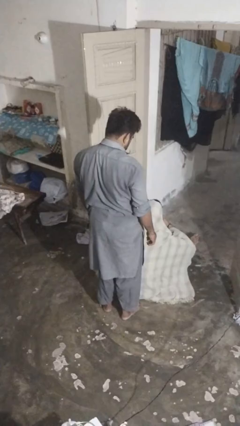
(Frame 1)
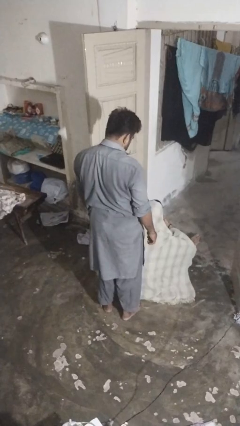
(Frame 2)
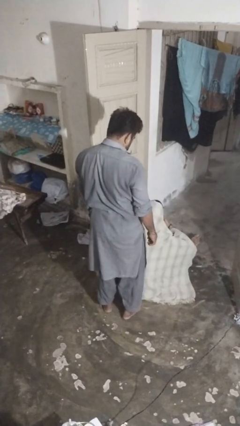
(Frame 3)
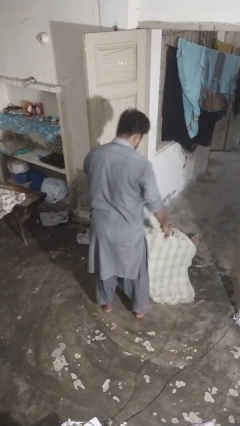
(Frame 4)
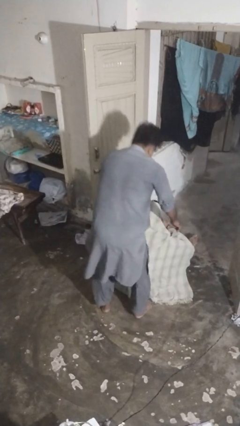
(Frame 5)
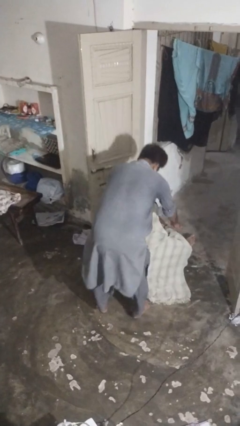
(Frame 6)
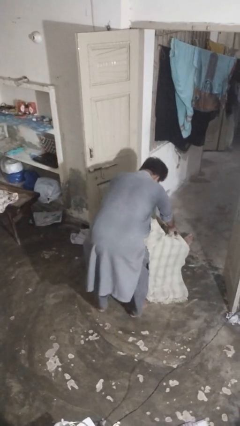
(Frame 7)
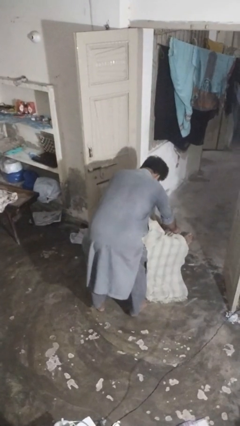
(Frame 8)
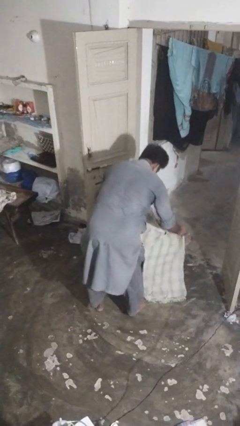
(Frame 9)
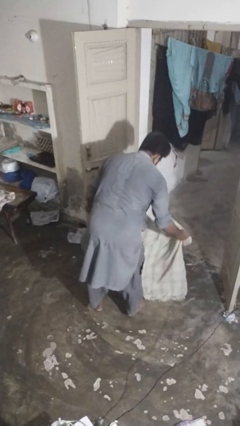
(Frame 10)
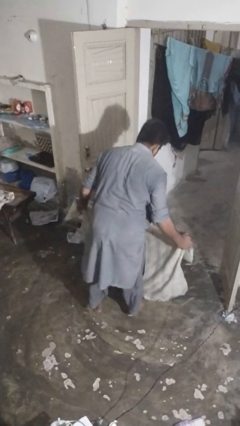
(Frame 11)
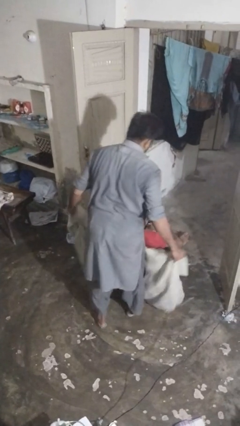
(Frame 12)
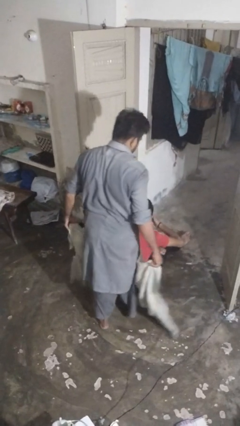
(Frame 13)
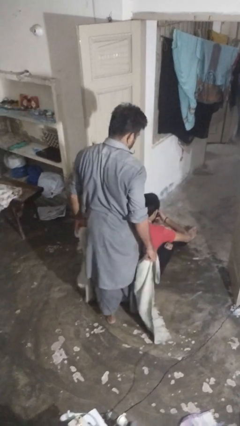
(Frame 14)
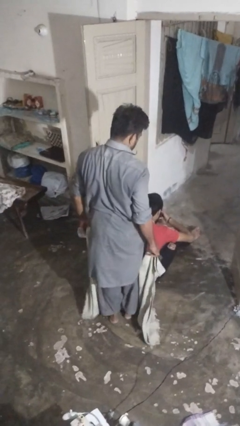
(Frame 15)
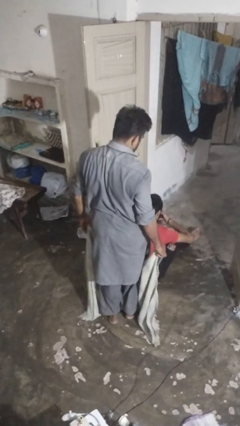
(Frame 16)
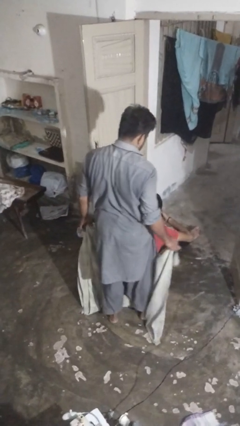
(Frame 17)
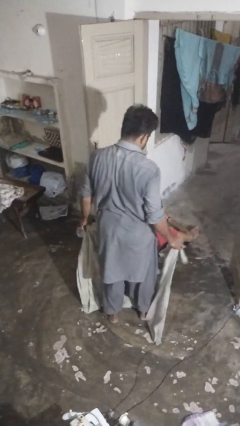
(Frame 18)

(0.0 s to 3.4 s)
person uncovers friend with blanket

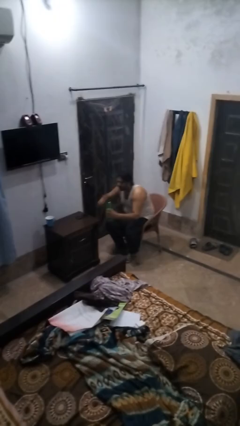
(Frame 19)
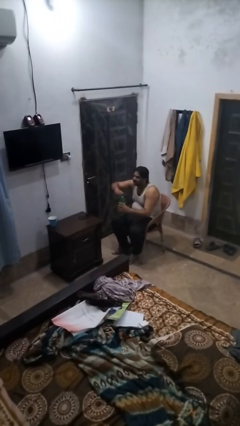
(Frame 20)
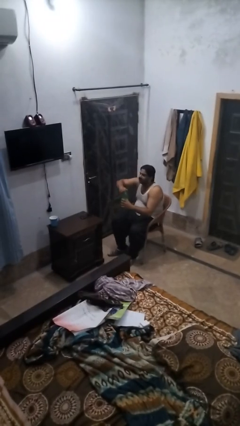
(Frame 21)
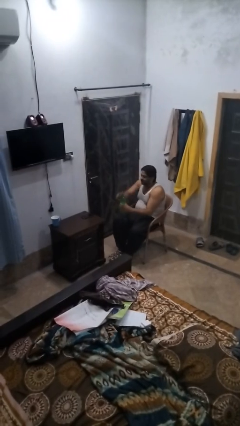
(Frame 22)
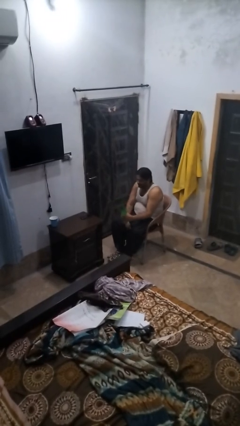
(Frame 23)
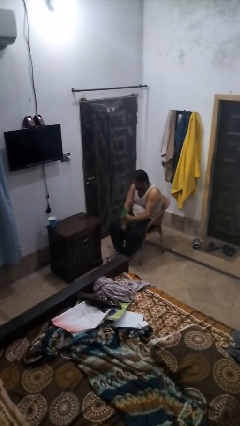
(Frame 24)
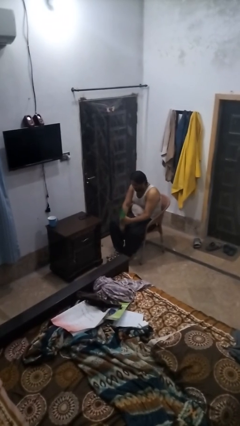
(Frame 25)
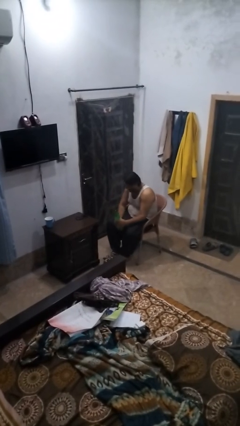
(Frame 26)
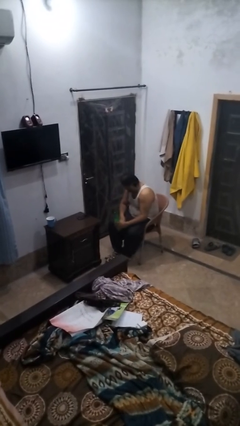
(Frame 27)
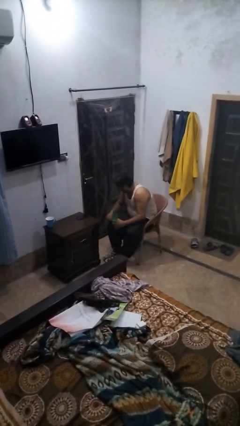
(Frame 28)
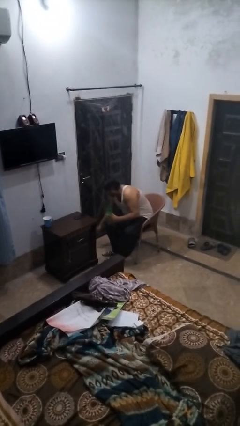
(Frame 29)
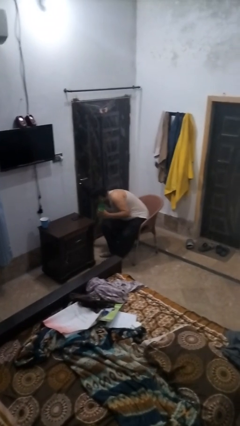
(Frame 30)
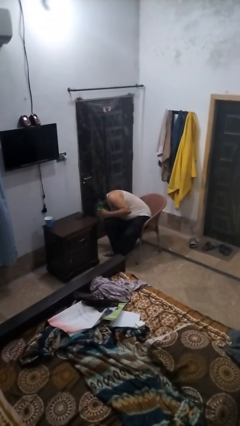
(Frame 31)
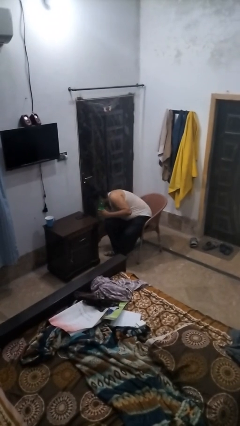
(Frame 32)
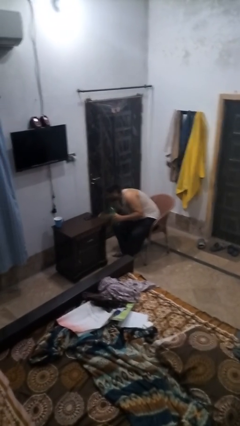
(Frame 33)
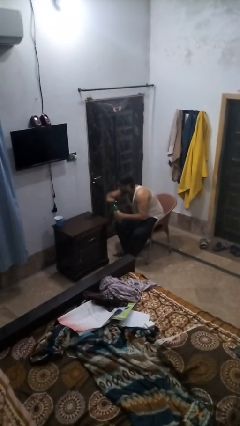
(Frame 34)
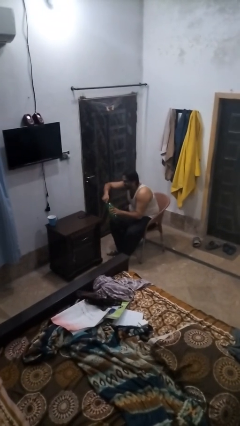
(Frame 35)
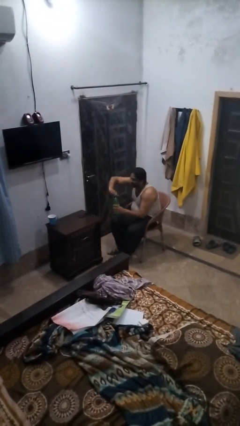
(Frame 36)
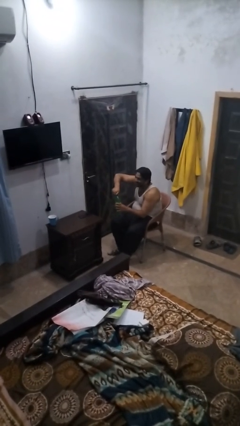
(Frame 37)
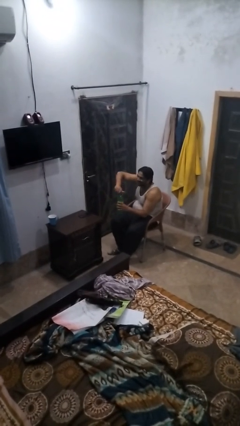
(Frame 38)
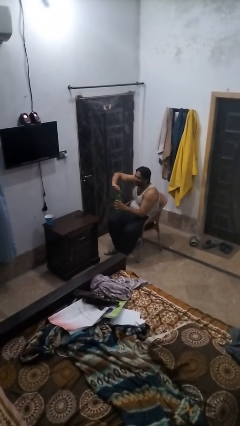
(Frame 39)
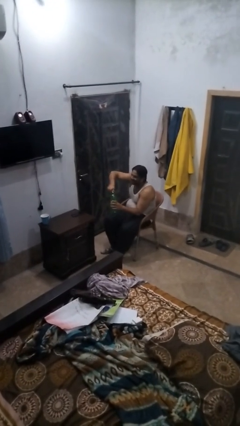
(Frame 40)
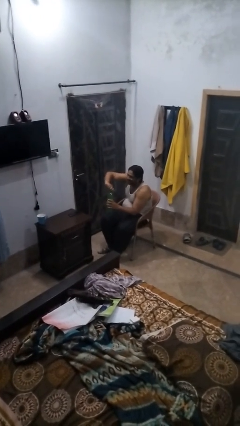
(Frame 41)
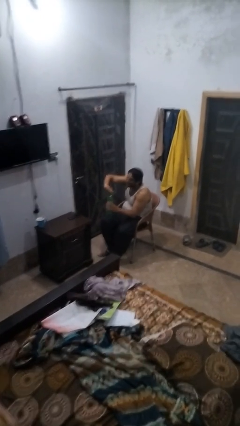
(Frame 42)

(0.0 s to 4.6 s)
person unscrews lid from bottle

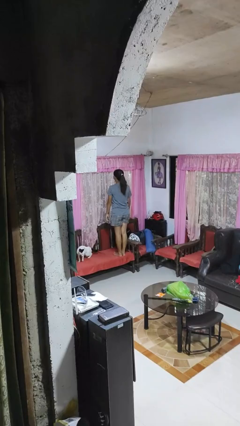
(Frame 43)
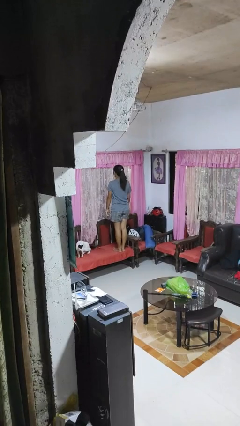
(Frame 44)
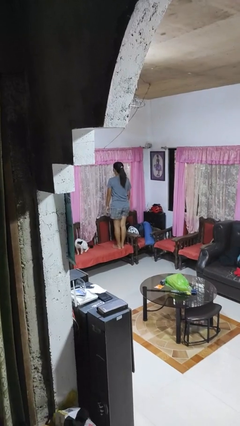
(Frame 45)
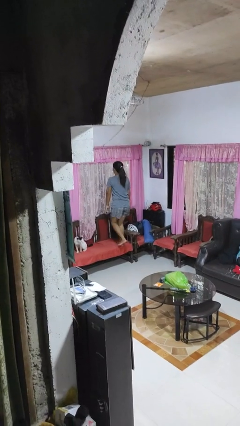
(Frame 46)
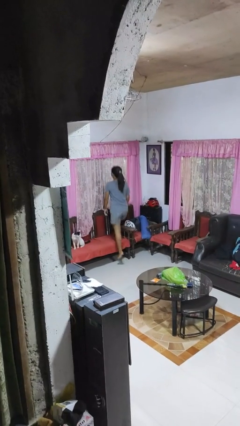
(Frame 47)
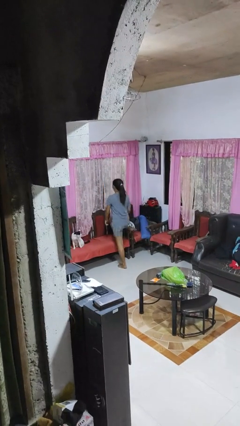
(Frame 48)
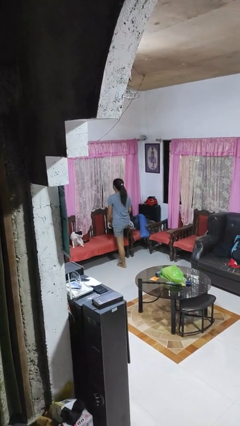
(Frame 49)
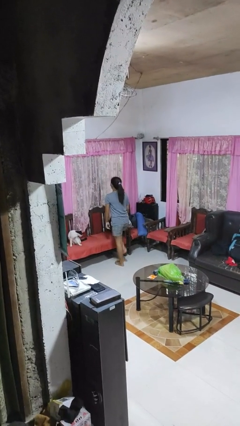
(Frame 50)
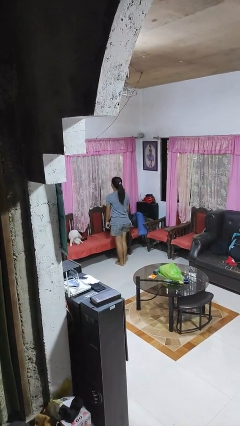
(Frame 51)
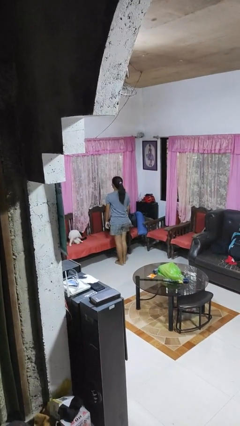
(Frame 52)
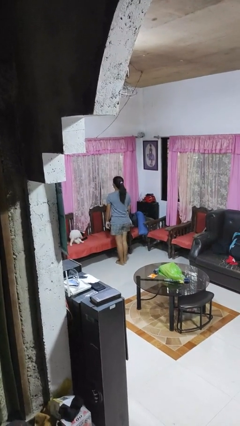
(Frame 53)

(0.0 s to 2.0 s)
person climbs off chair

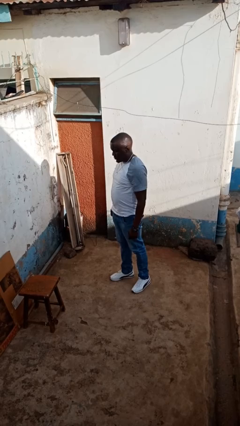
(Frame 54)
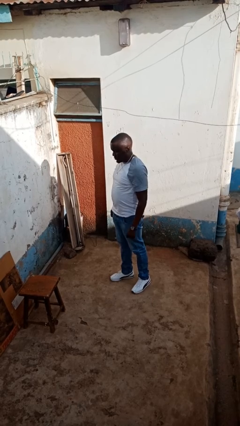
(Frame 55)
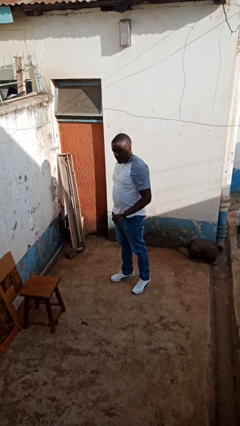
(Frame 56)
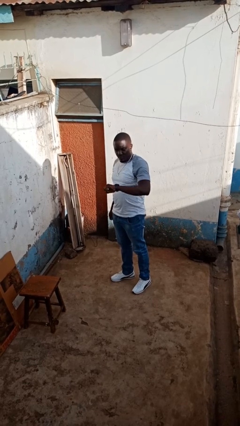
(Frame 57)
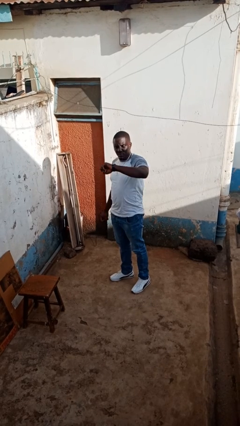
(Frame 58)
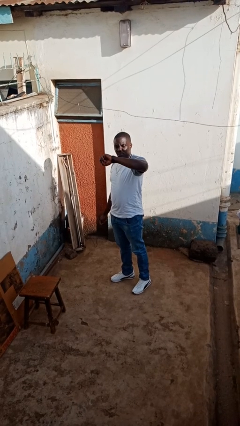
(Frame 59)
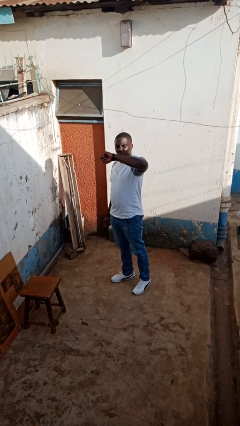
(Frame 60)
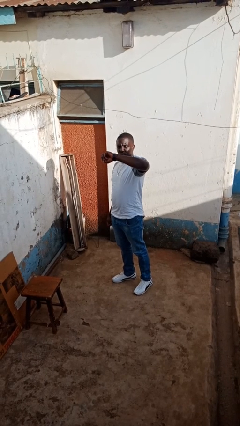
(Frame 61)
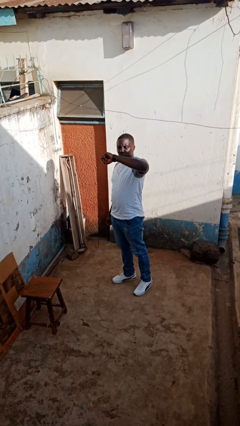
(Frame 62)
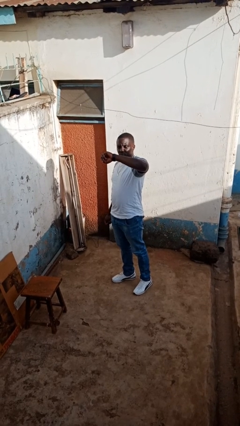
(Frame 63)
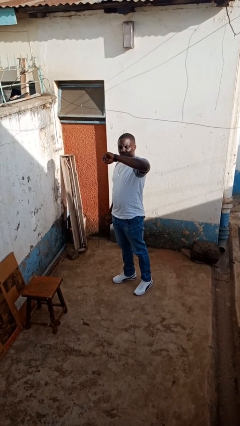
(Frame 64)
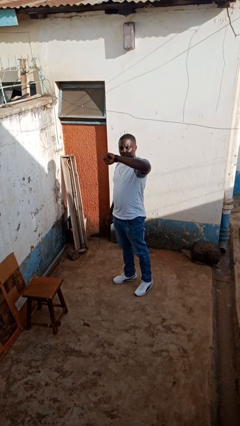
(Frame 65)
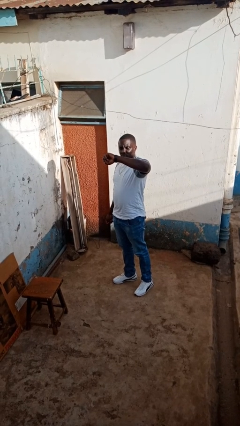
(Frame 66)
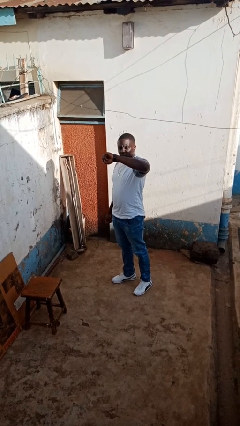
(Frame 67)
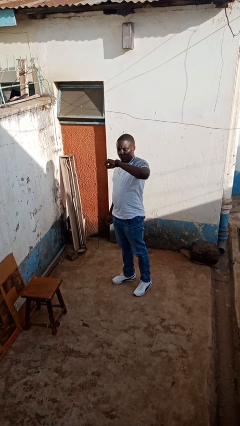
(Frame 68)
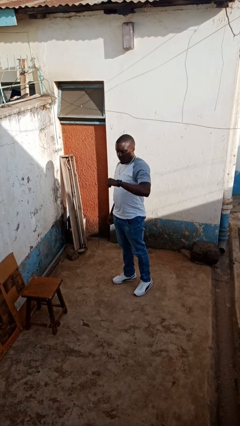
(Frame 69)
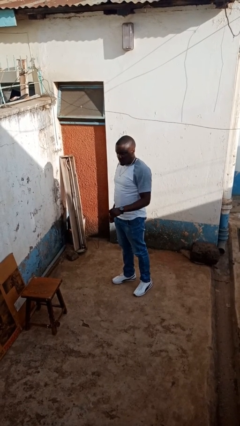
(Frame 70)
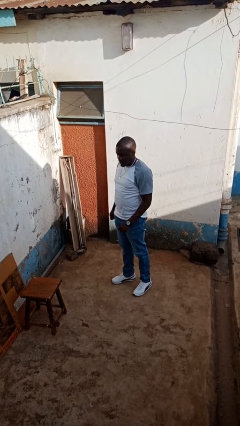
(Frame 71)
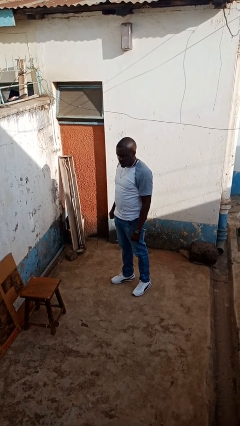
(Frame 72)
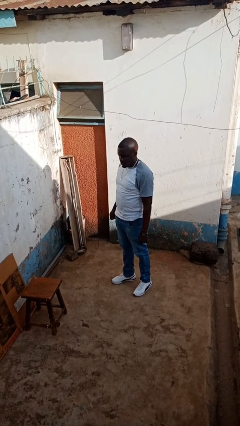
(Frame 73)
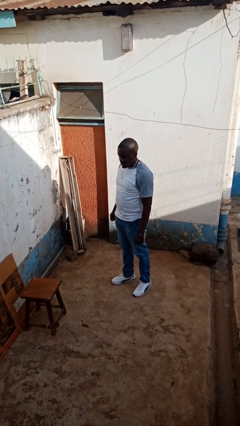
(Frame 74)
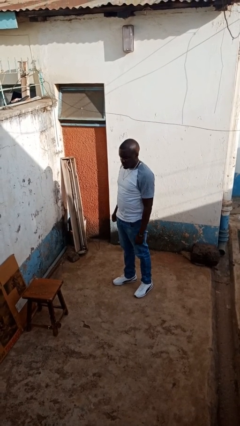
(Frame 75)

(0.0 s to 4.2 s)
person looks at wristwatch

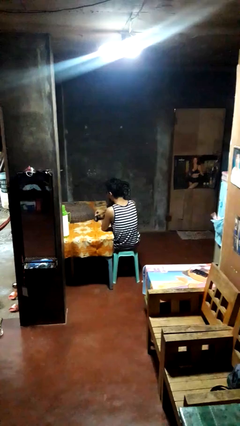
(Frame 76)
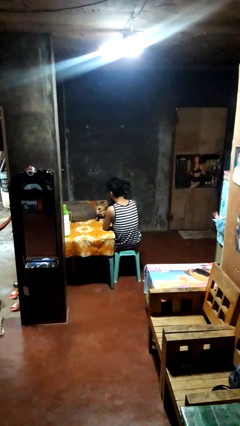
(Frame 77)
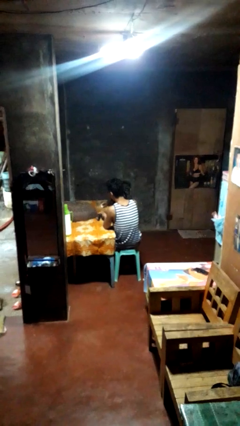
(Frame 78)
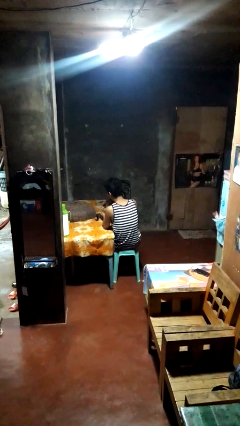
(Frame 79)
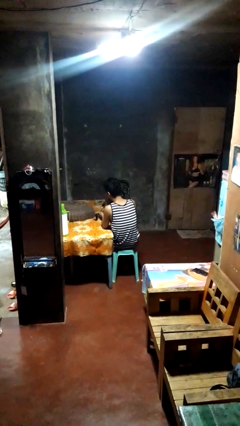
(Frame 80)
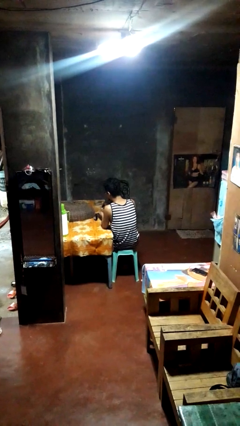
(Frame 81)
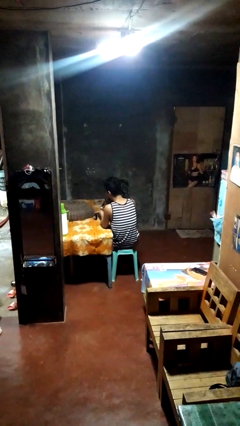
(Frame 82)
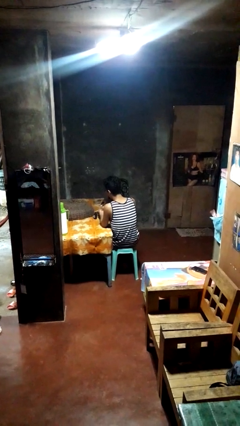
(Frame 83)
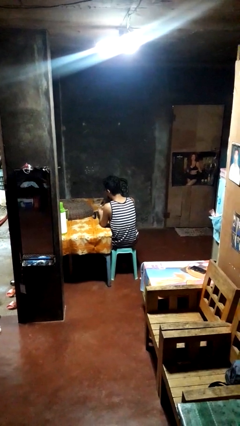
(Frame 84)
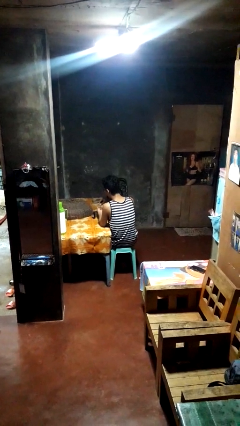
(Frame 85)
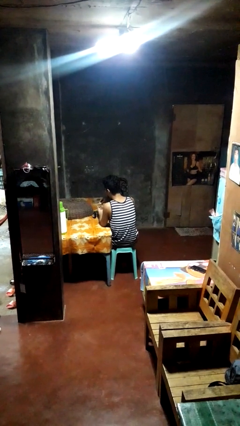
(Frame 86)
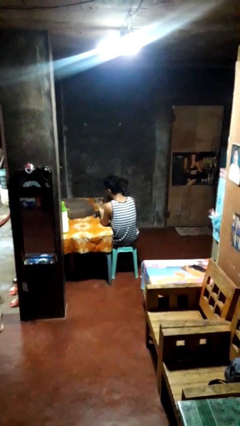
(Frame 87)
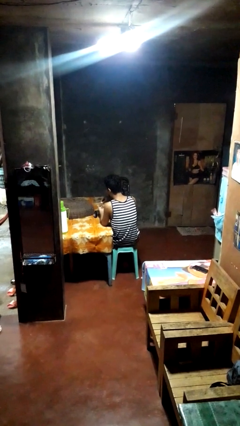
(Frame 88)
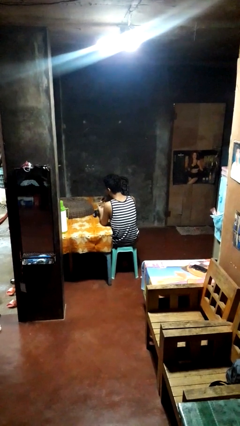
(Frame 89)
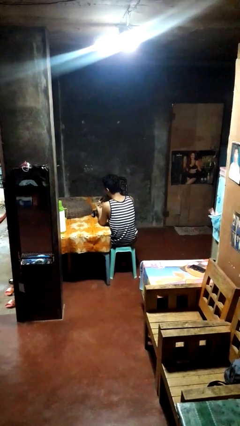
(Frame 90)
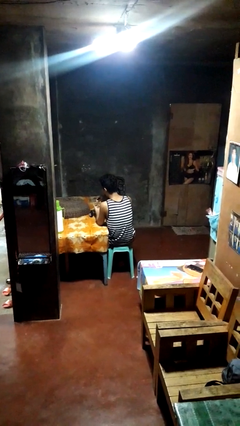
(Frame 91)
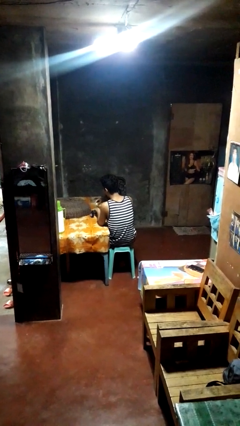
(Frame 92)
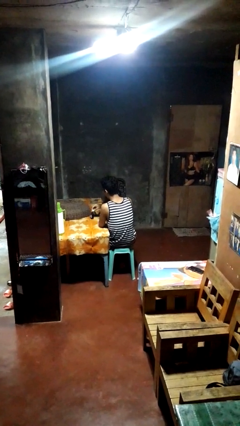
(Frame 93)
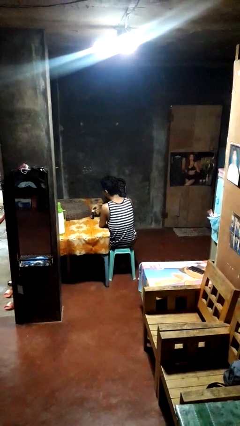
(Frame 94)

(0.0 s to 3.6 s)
person paints fingernails
